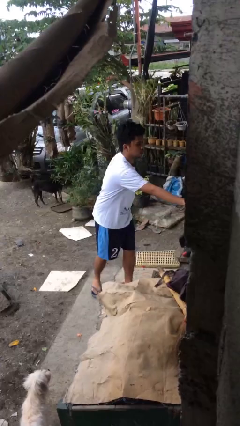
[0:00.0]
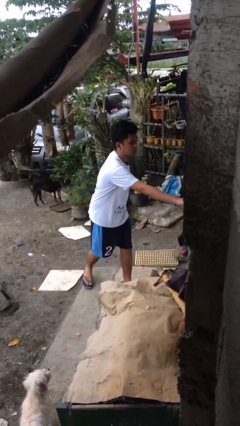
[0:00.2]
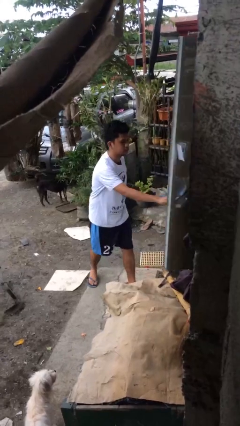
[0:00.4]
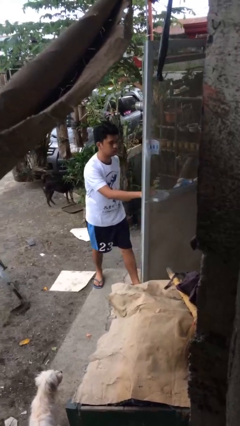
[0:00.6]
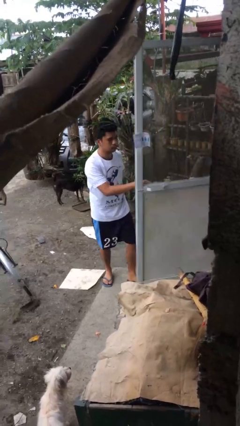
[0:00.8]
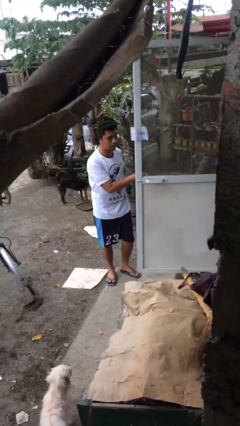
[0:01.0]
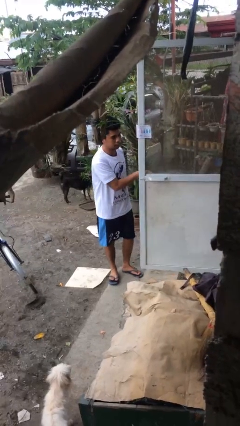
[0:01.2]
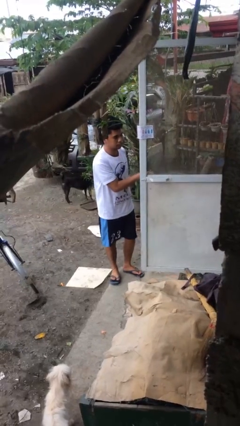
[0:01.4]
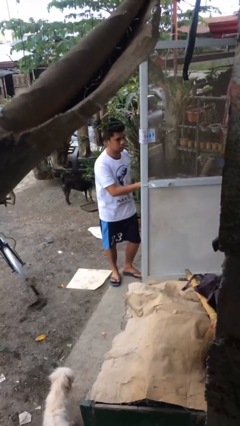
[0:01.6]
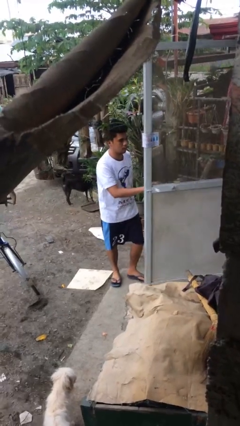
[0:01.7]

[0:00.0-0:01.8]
person opens facility door

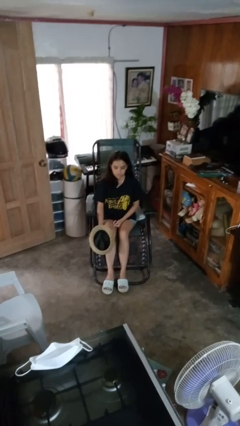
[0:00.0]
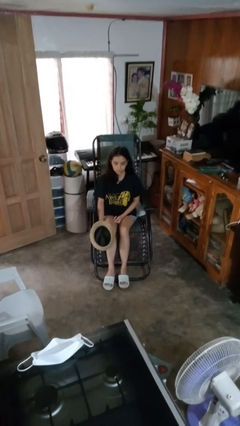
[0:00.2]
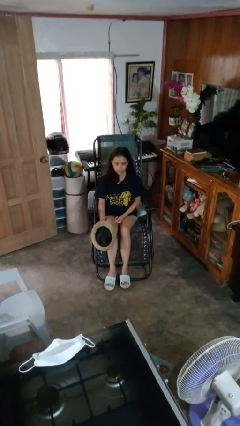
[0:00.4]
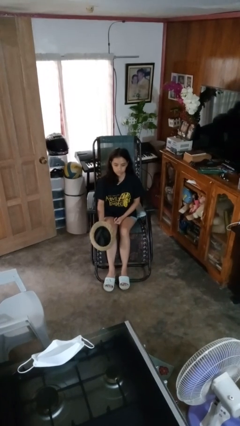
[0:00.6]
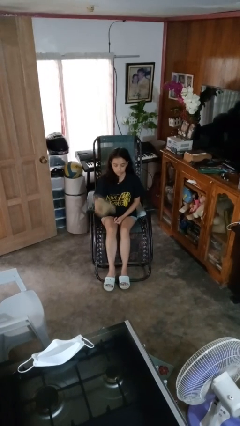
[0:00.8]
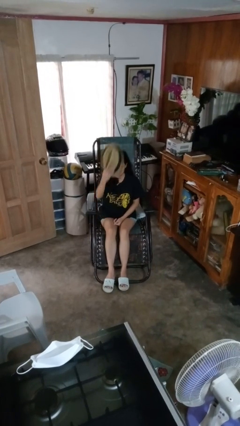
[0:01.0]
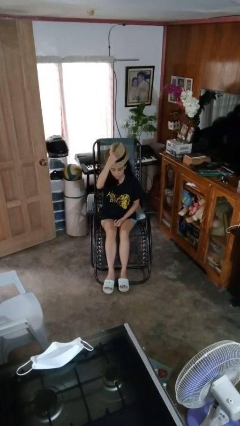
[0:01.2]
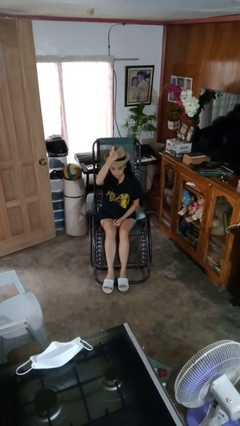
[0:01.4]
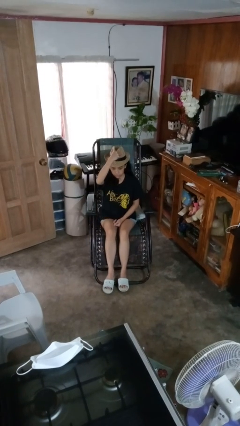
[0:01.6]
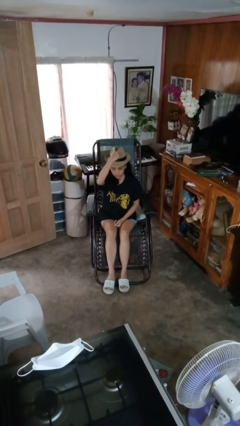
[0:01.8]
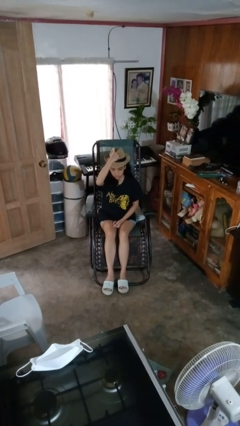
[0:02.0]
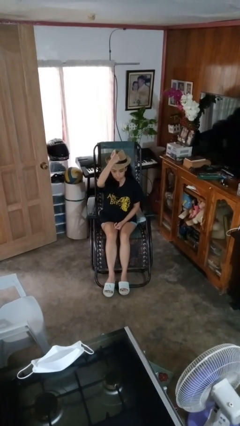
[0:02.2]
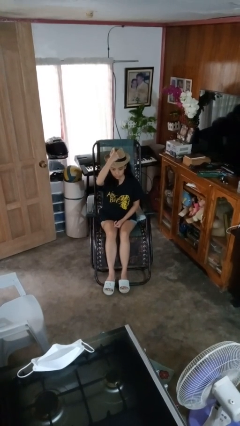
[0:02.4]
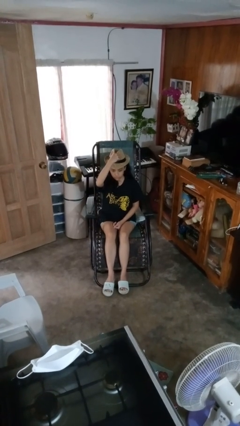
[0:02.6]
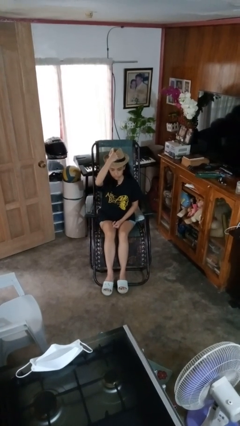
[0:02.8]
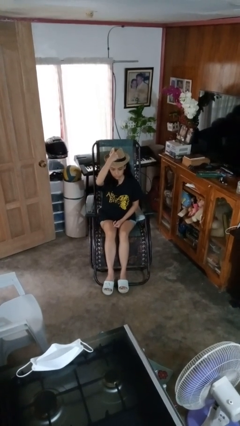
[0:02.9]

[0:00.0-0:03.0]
person puts on hat

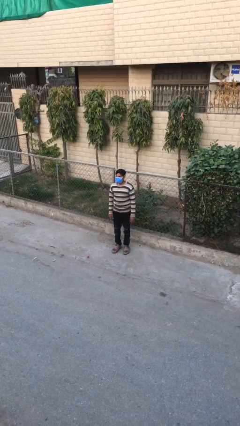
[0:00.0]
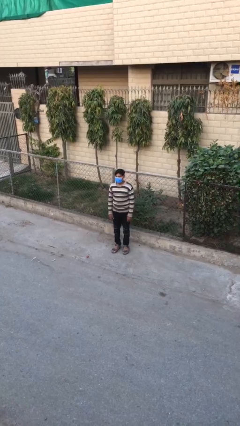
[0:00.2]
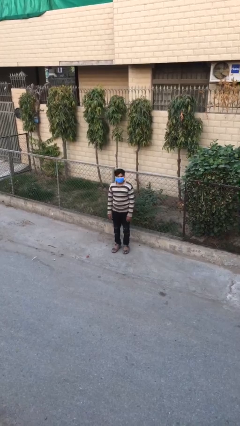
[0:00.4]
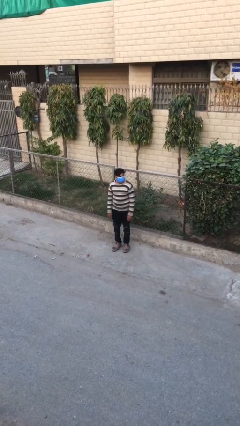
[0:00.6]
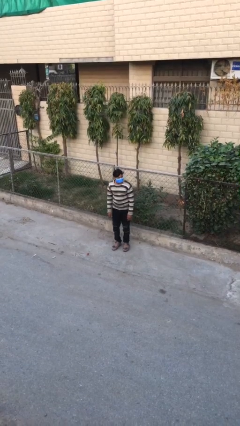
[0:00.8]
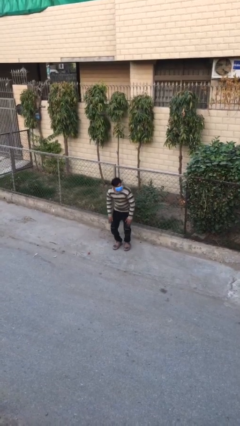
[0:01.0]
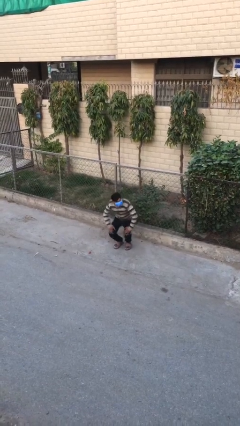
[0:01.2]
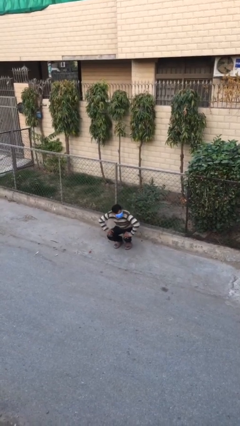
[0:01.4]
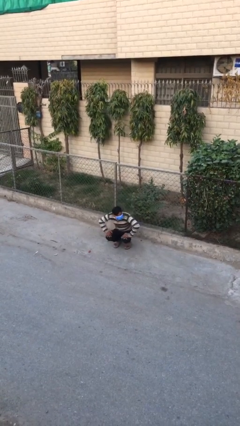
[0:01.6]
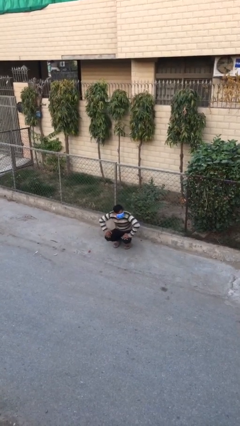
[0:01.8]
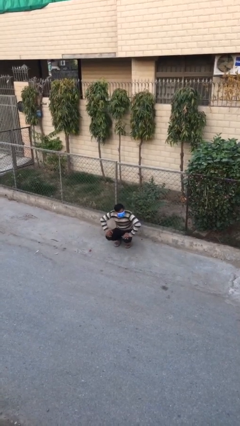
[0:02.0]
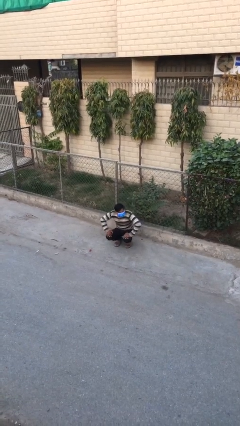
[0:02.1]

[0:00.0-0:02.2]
person sits down

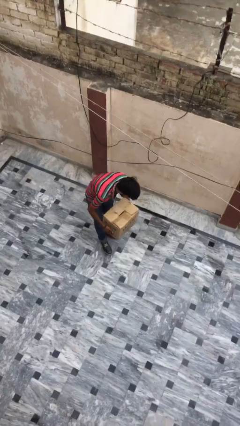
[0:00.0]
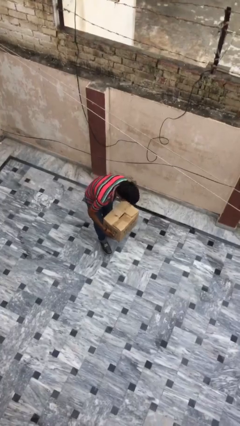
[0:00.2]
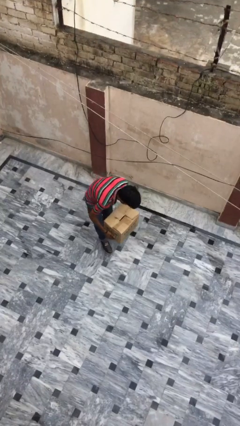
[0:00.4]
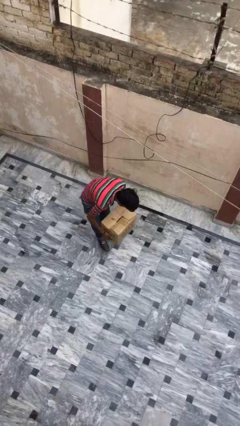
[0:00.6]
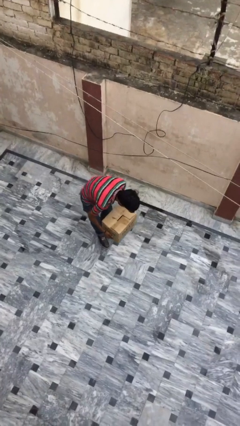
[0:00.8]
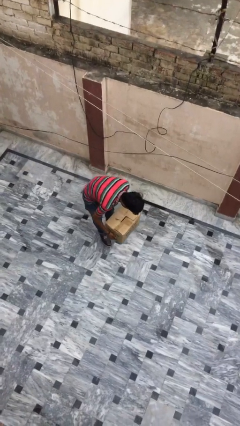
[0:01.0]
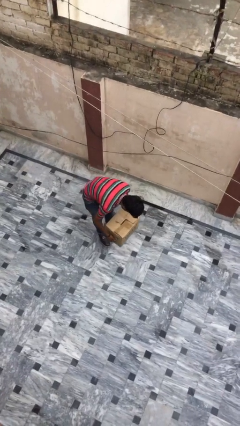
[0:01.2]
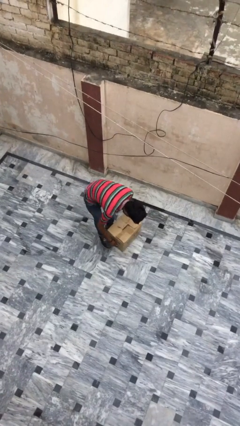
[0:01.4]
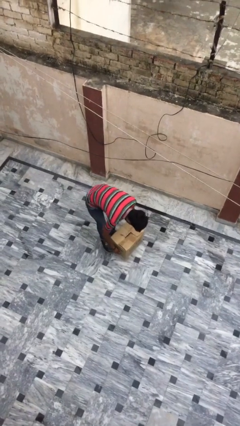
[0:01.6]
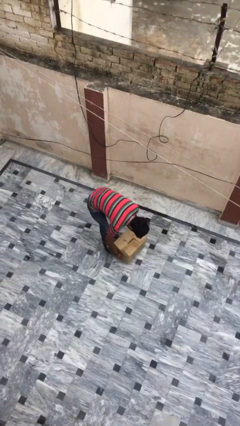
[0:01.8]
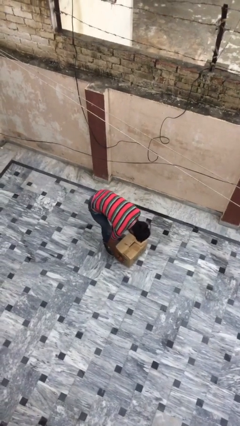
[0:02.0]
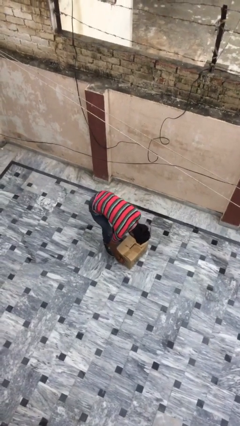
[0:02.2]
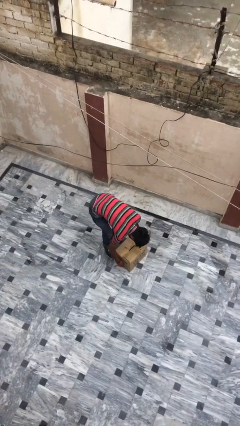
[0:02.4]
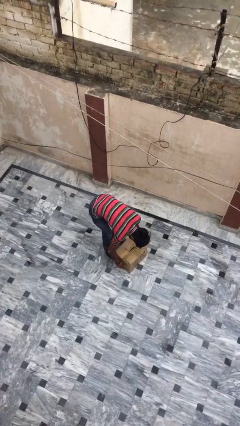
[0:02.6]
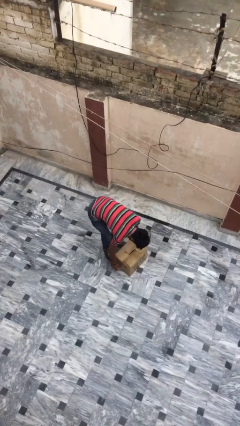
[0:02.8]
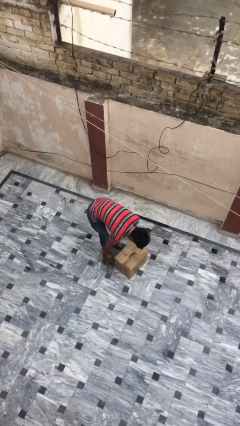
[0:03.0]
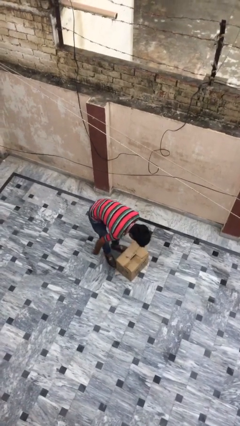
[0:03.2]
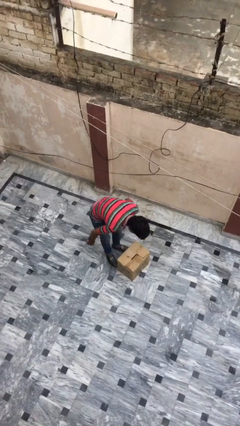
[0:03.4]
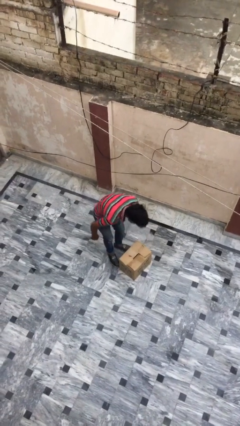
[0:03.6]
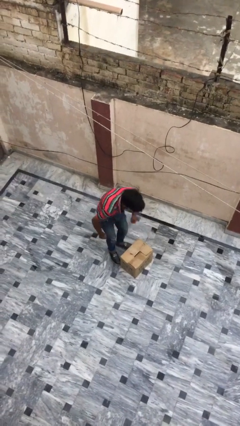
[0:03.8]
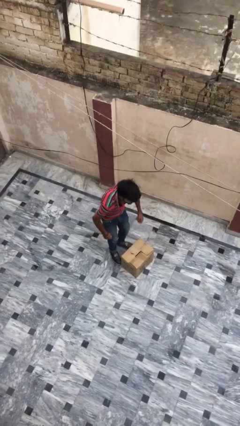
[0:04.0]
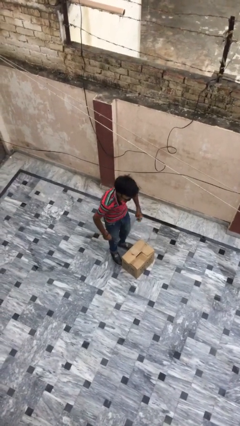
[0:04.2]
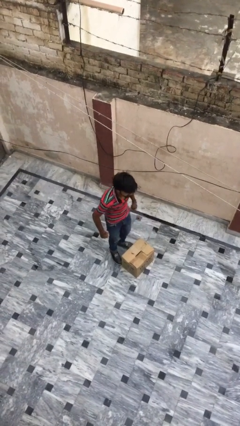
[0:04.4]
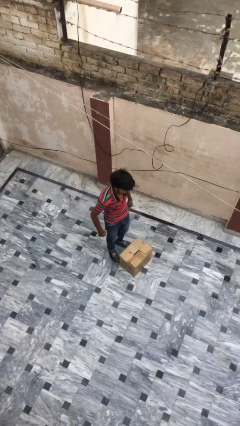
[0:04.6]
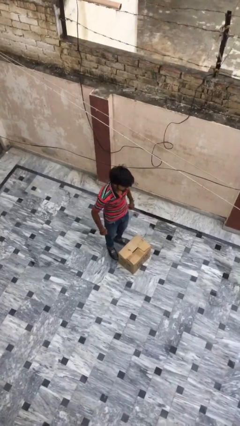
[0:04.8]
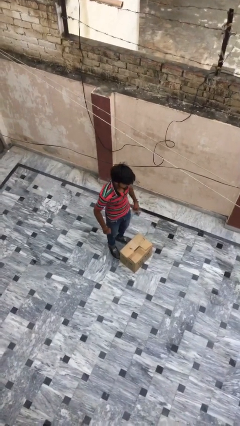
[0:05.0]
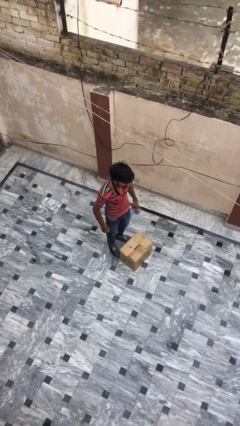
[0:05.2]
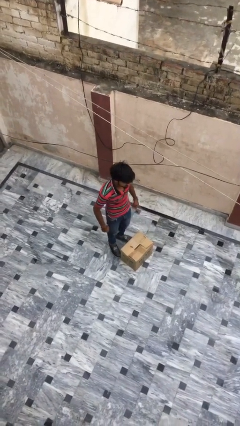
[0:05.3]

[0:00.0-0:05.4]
person puts down object on floor

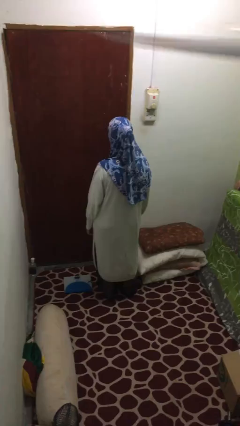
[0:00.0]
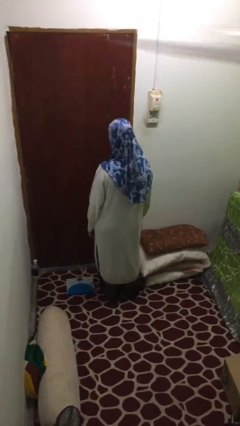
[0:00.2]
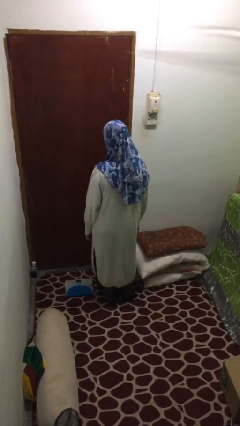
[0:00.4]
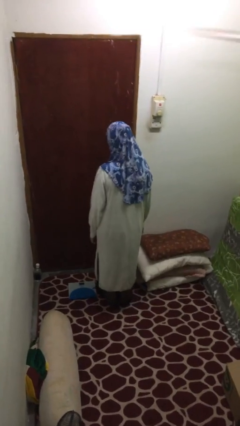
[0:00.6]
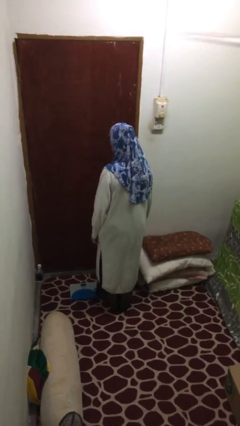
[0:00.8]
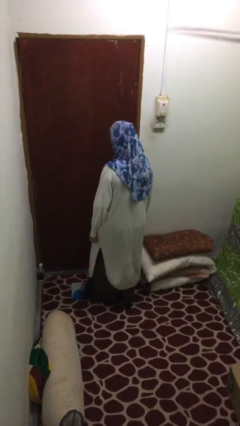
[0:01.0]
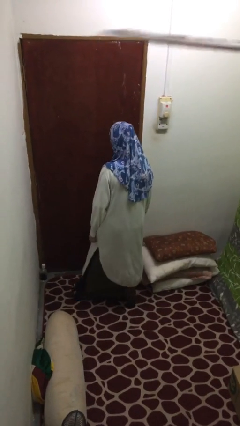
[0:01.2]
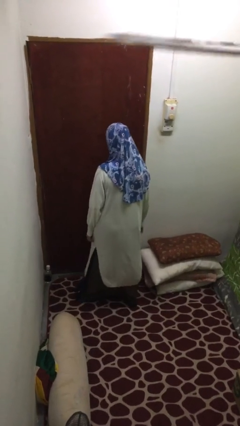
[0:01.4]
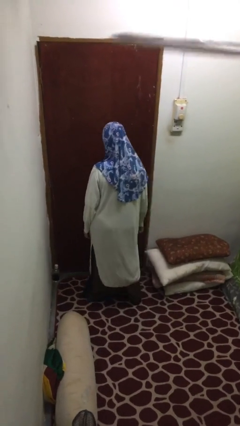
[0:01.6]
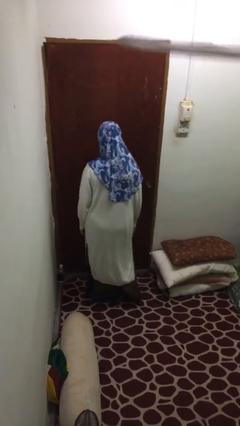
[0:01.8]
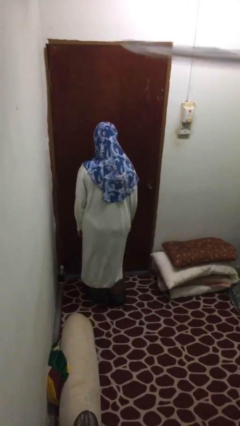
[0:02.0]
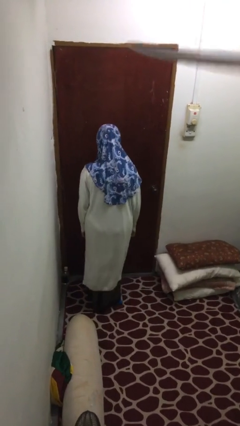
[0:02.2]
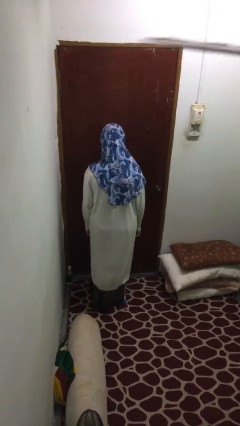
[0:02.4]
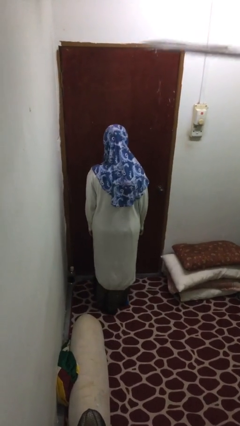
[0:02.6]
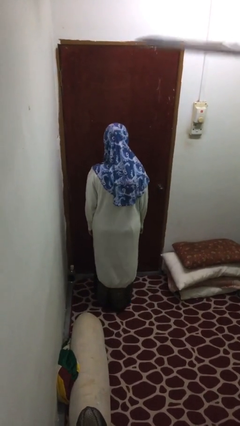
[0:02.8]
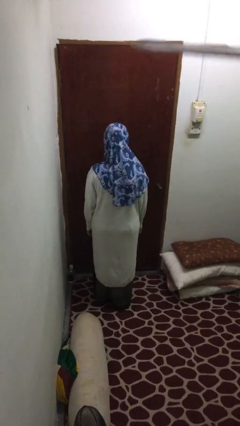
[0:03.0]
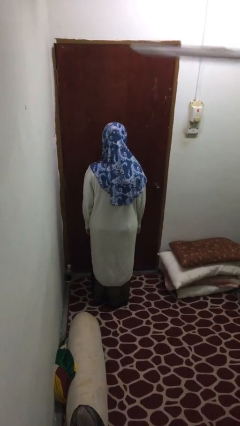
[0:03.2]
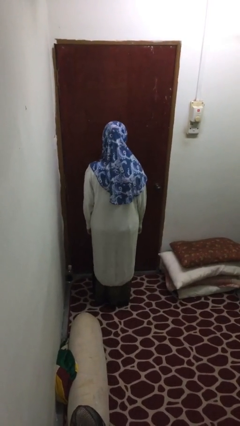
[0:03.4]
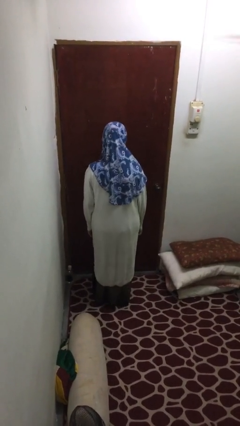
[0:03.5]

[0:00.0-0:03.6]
person uses bodyweight scale

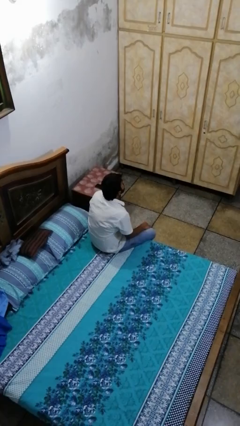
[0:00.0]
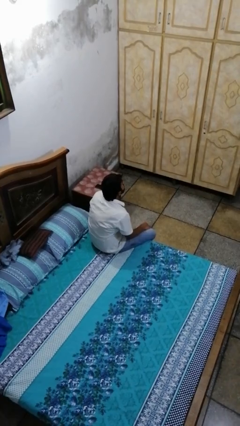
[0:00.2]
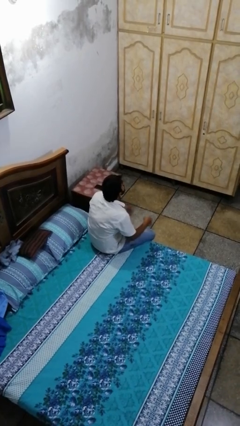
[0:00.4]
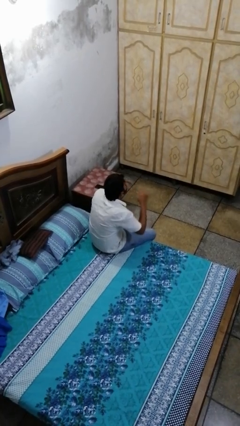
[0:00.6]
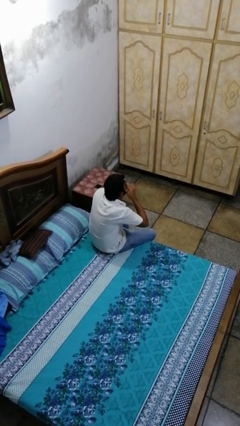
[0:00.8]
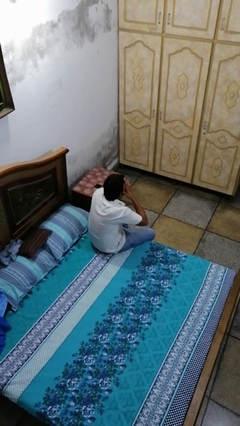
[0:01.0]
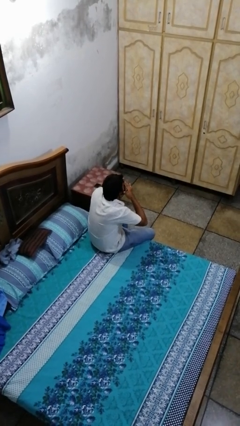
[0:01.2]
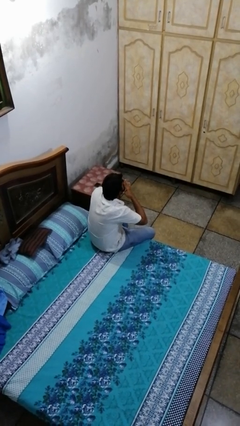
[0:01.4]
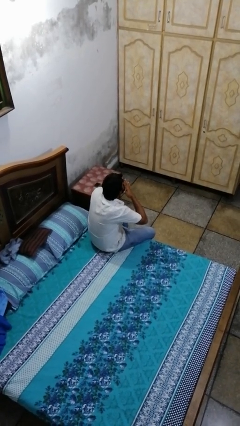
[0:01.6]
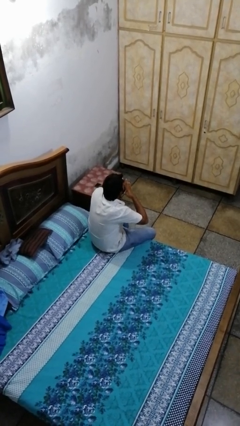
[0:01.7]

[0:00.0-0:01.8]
person rubs eyes
